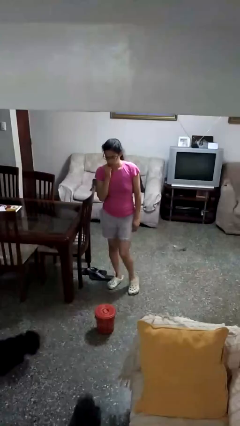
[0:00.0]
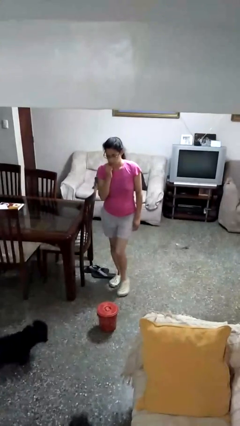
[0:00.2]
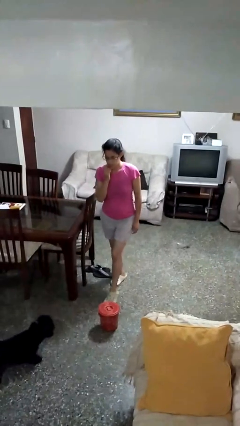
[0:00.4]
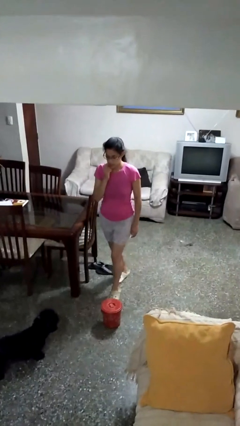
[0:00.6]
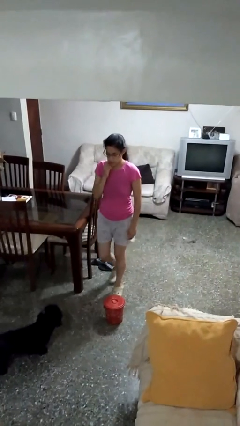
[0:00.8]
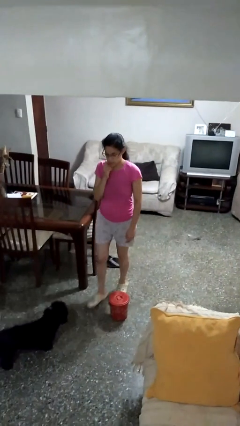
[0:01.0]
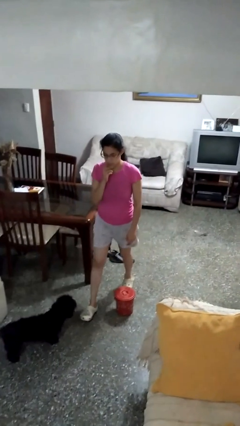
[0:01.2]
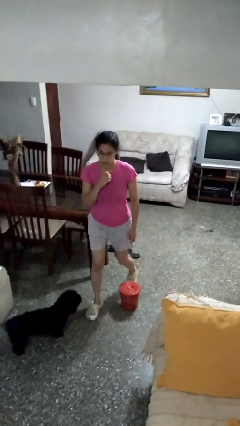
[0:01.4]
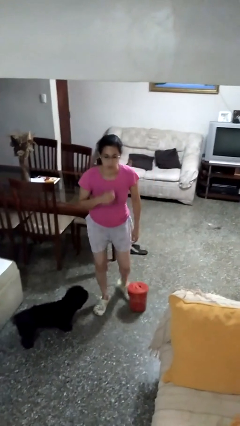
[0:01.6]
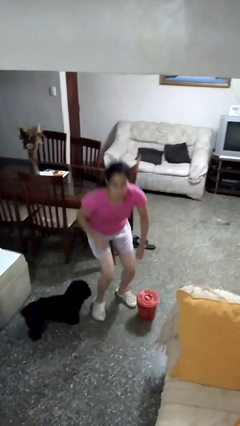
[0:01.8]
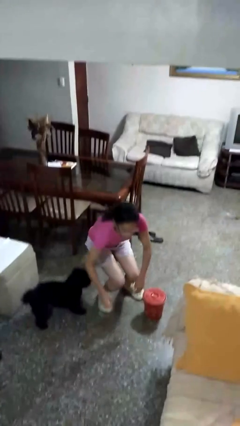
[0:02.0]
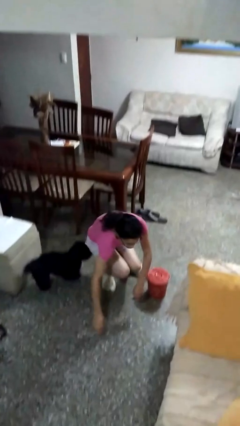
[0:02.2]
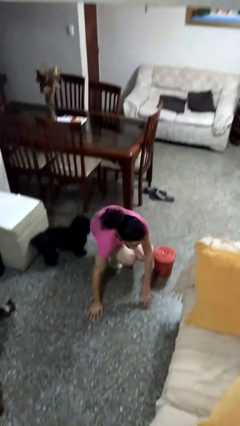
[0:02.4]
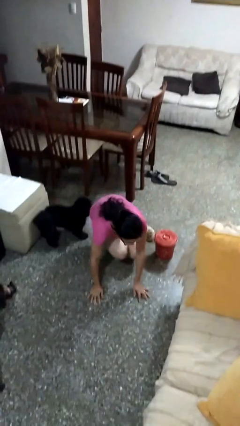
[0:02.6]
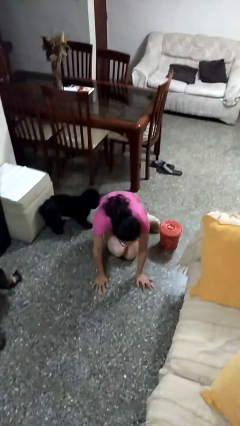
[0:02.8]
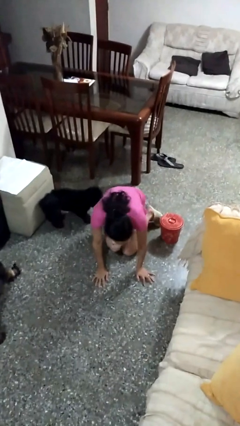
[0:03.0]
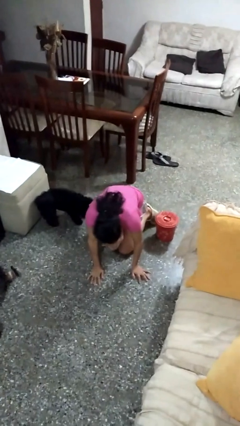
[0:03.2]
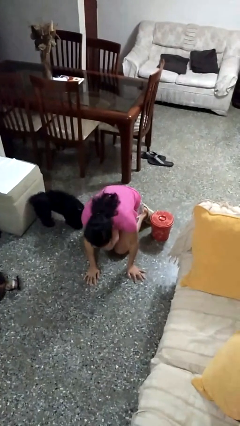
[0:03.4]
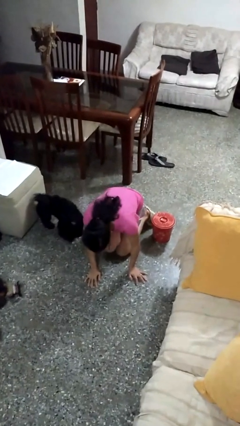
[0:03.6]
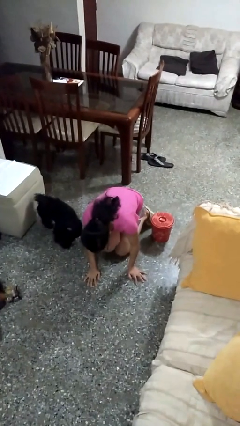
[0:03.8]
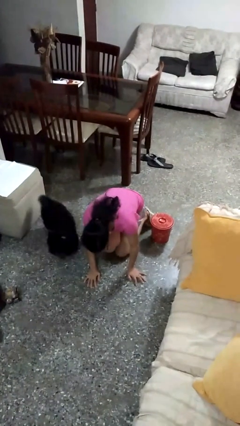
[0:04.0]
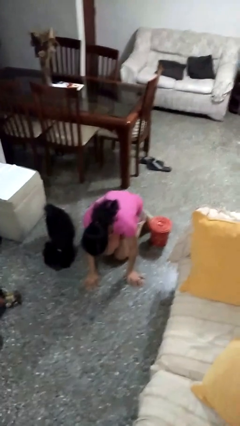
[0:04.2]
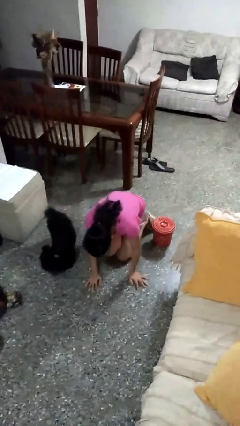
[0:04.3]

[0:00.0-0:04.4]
person trips on object on floor

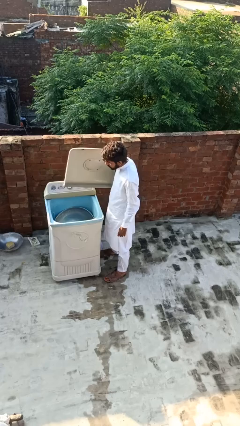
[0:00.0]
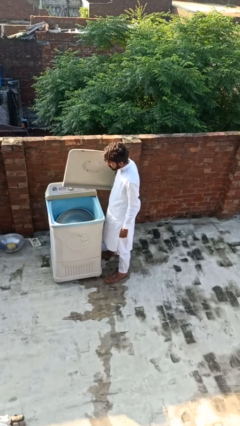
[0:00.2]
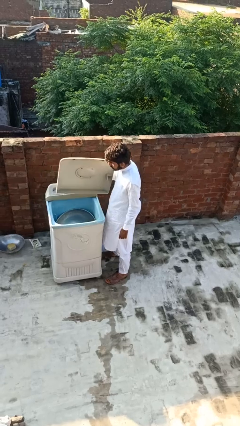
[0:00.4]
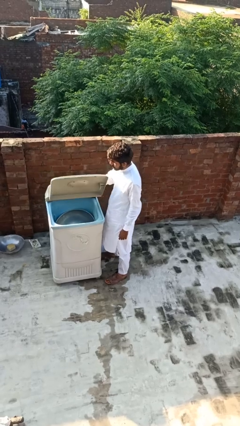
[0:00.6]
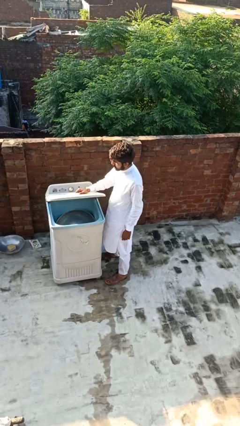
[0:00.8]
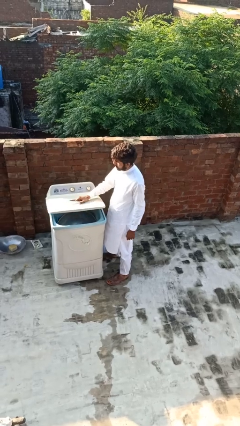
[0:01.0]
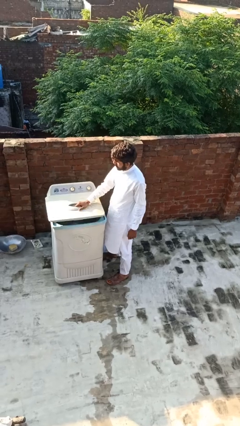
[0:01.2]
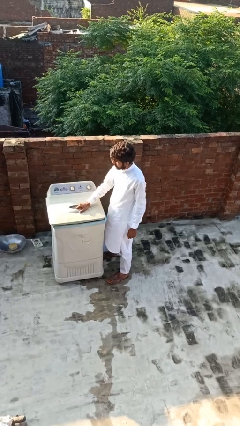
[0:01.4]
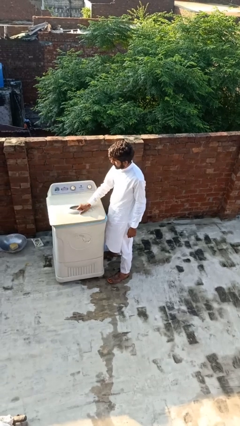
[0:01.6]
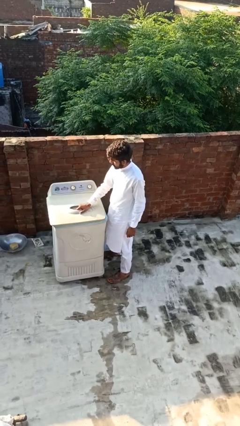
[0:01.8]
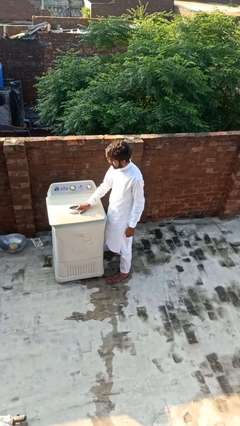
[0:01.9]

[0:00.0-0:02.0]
person closes clothes washer

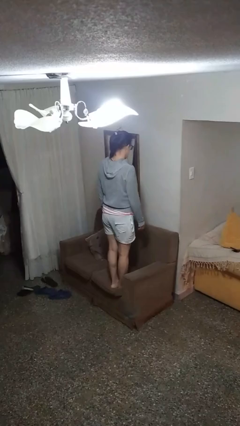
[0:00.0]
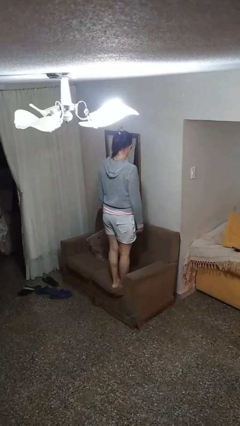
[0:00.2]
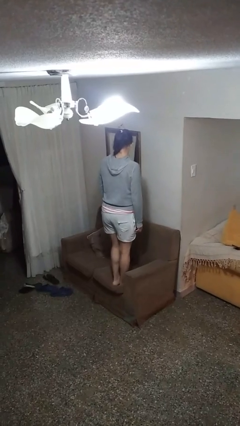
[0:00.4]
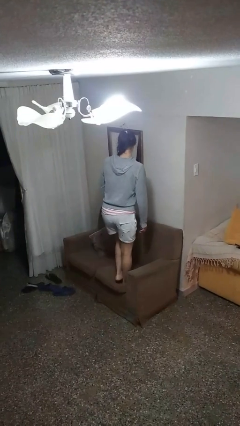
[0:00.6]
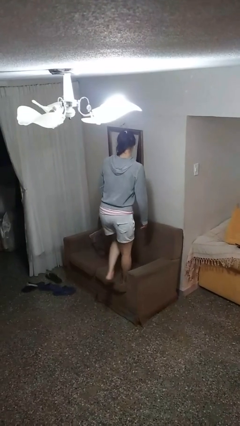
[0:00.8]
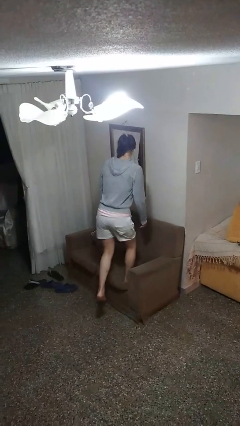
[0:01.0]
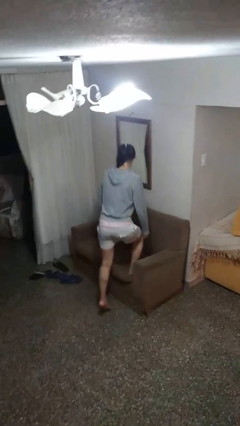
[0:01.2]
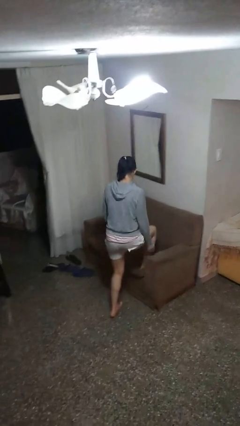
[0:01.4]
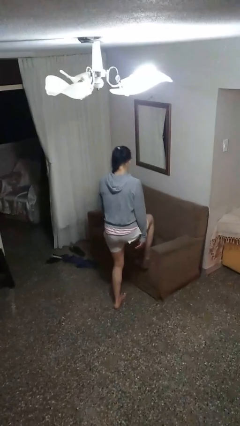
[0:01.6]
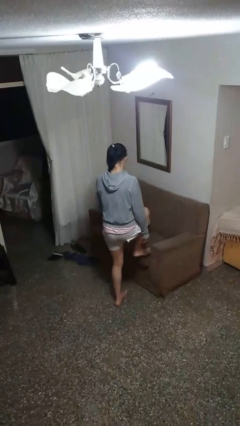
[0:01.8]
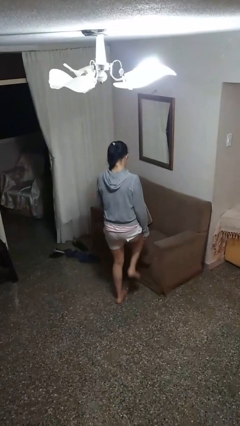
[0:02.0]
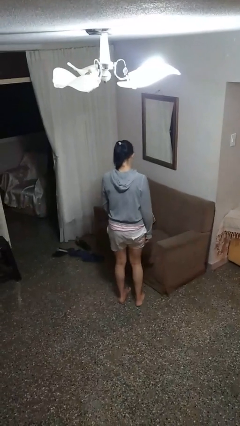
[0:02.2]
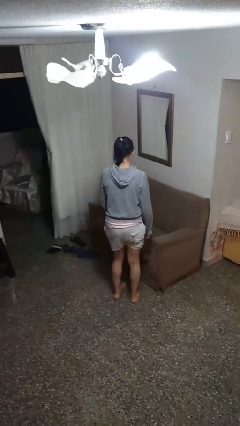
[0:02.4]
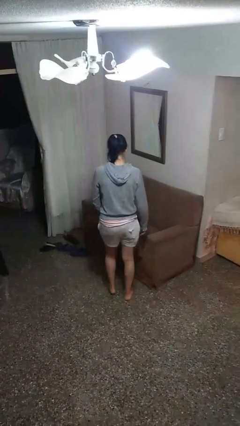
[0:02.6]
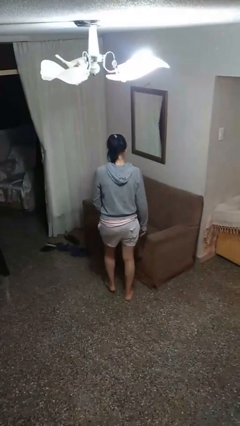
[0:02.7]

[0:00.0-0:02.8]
person climbs off couch

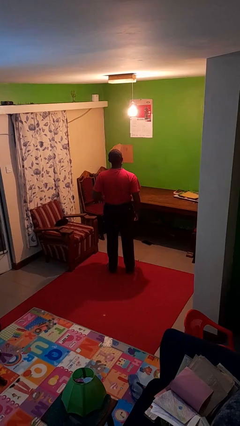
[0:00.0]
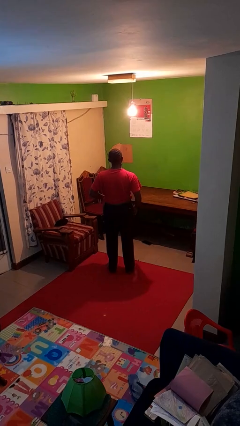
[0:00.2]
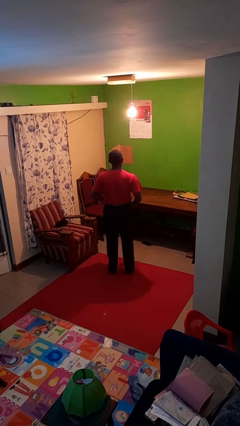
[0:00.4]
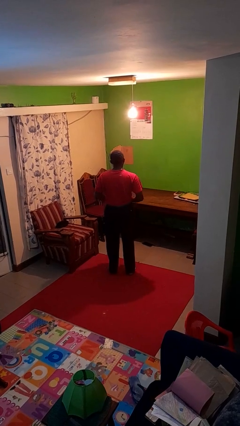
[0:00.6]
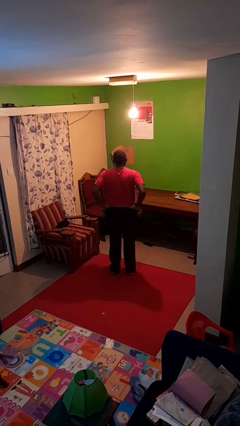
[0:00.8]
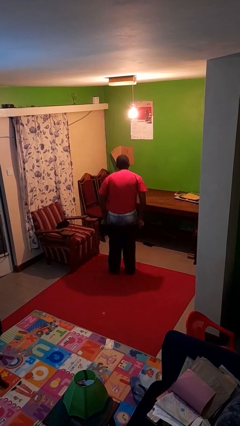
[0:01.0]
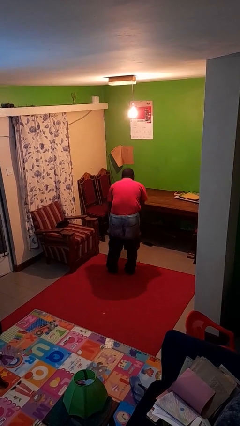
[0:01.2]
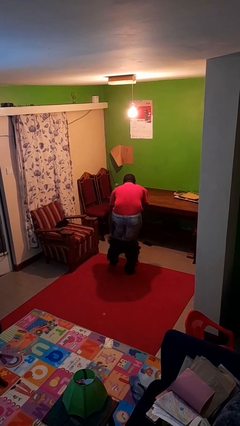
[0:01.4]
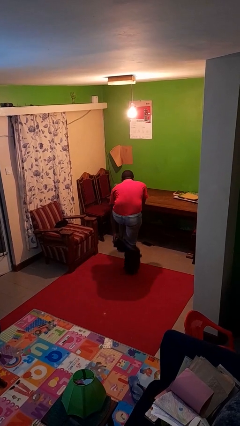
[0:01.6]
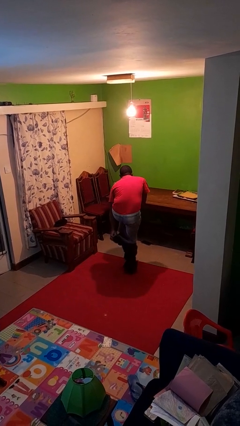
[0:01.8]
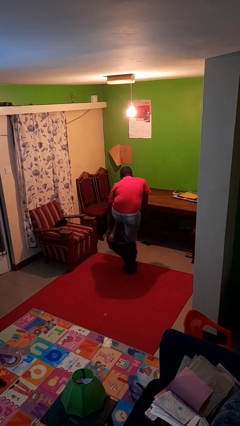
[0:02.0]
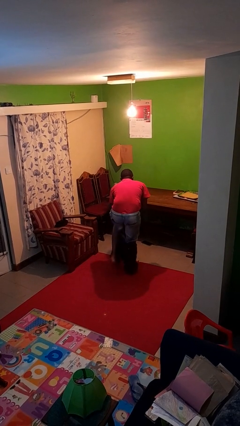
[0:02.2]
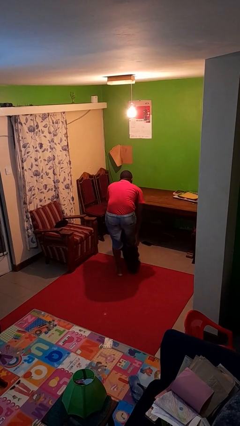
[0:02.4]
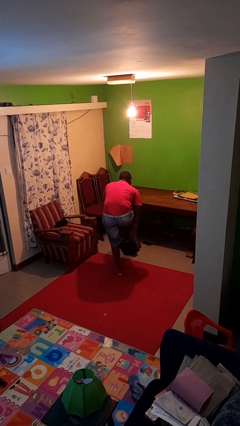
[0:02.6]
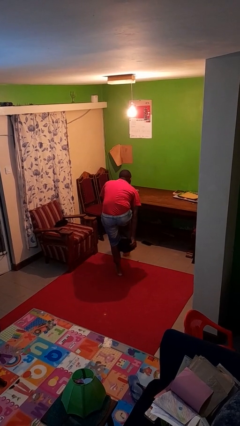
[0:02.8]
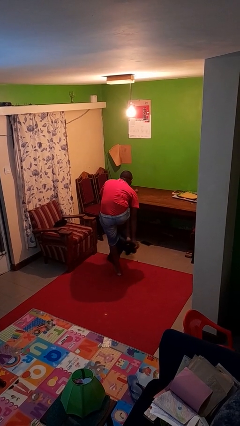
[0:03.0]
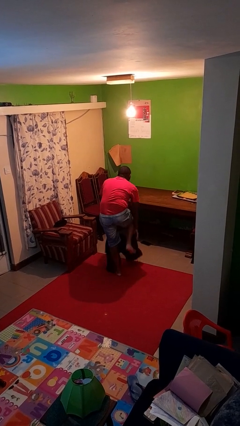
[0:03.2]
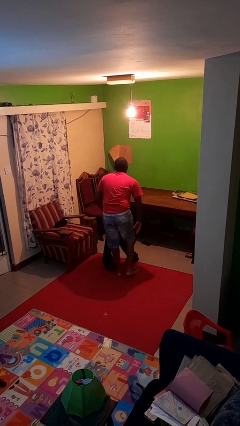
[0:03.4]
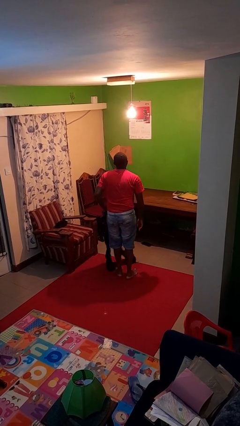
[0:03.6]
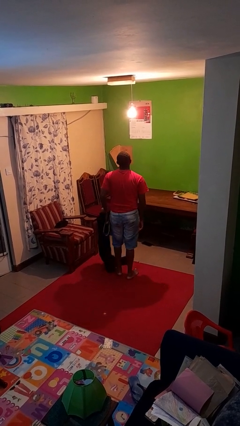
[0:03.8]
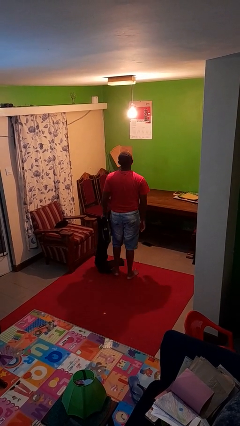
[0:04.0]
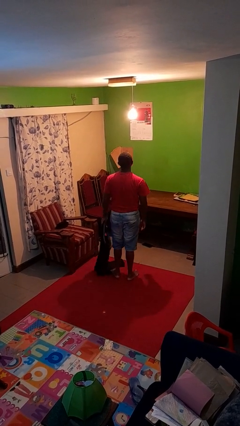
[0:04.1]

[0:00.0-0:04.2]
person takes off pants

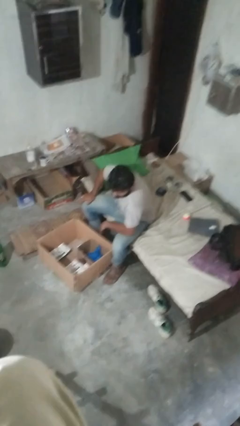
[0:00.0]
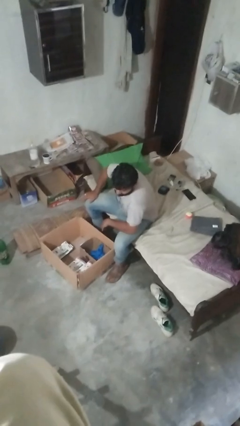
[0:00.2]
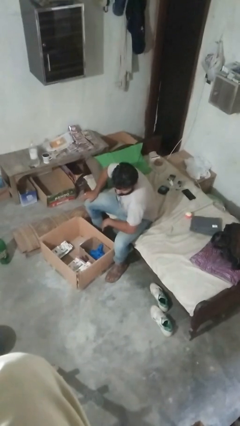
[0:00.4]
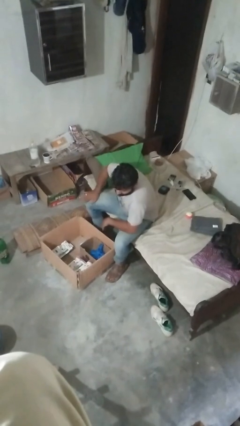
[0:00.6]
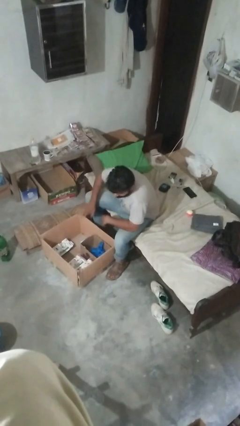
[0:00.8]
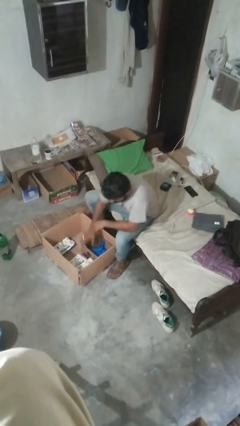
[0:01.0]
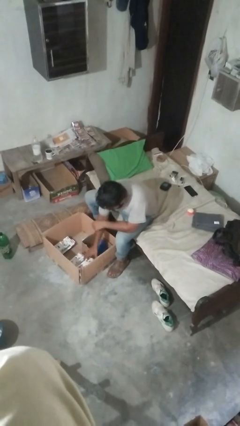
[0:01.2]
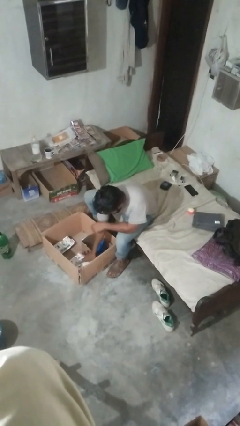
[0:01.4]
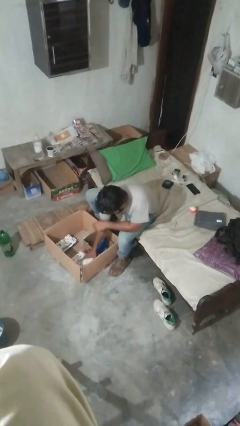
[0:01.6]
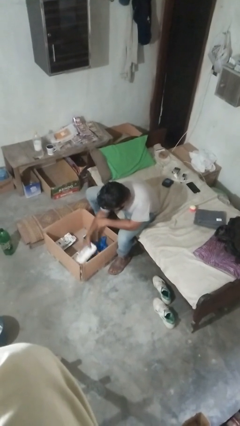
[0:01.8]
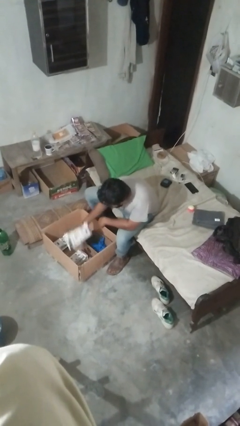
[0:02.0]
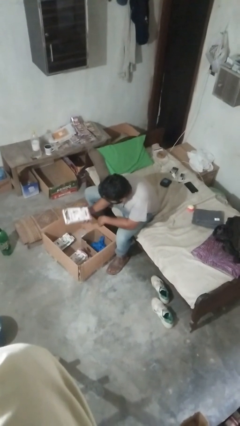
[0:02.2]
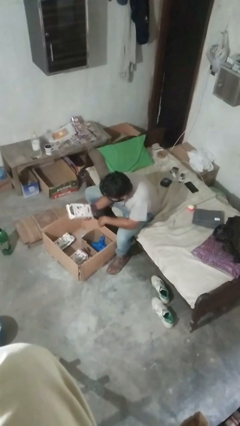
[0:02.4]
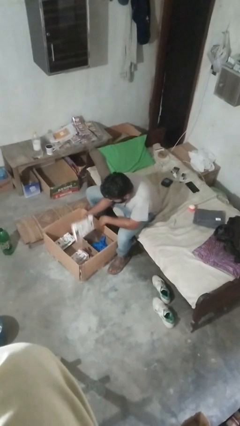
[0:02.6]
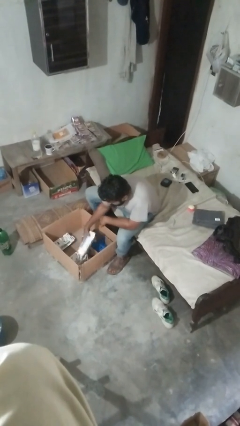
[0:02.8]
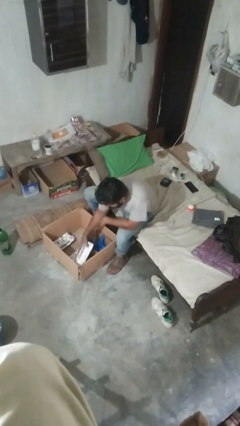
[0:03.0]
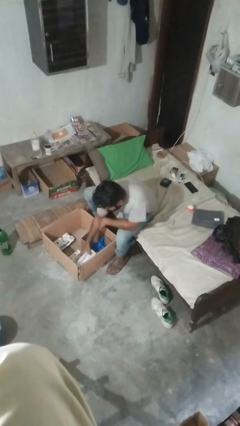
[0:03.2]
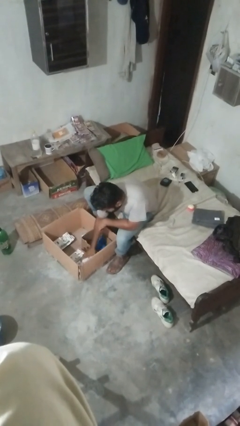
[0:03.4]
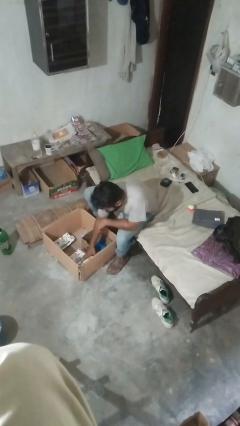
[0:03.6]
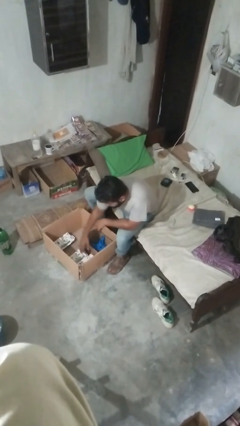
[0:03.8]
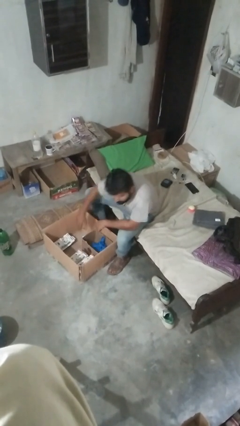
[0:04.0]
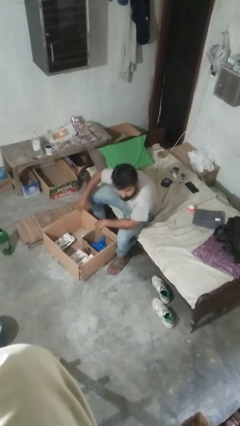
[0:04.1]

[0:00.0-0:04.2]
person searches in box

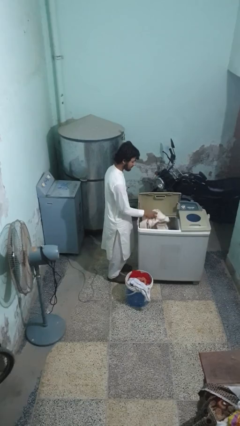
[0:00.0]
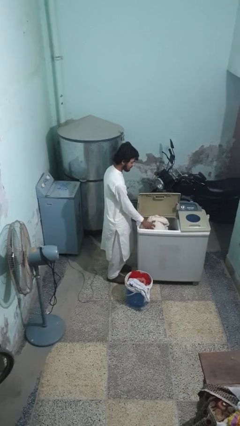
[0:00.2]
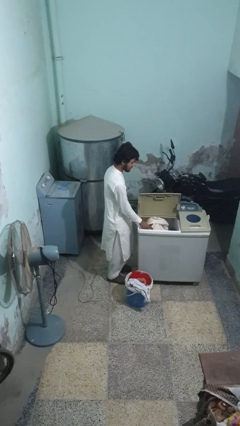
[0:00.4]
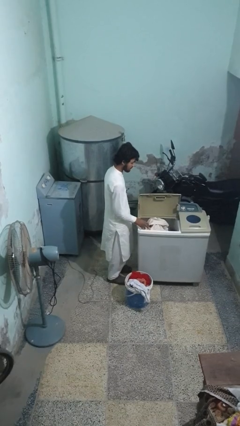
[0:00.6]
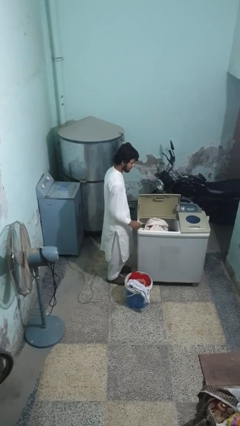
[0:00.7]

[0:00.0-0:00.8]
person loads clotheswasher
